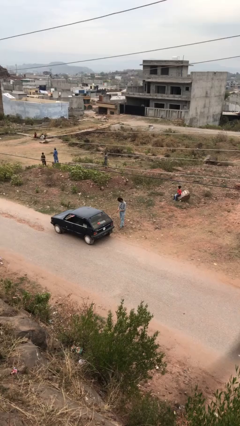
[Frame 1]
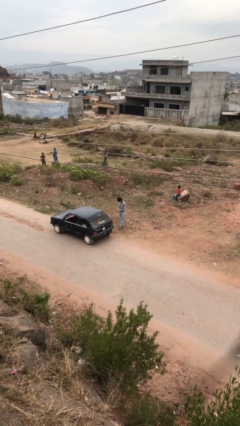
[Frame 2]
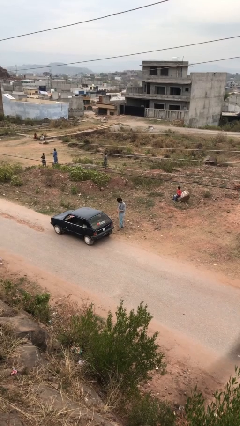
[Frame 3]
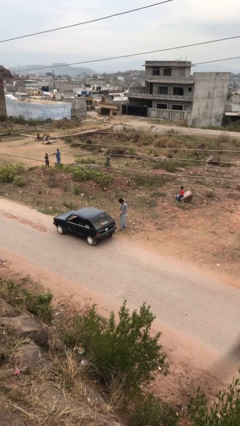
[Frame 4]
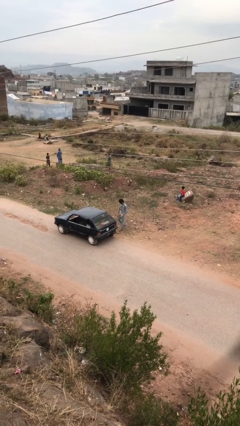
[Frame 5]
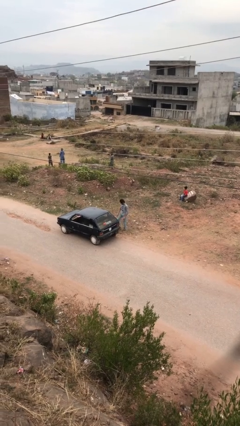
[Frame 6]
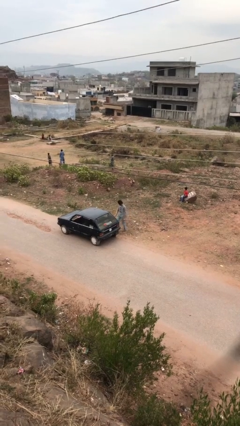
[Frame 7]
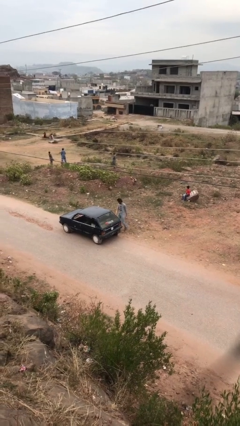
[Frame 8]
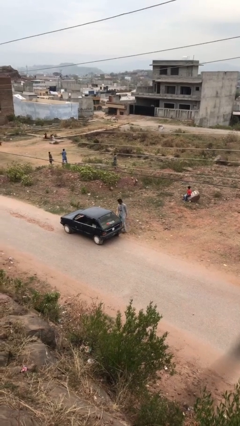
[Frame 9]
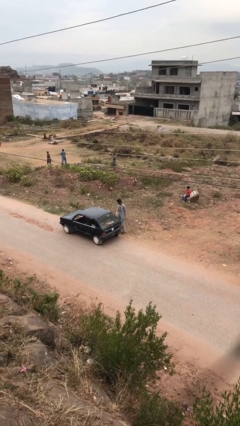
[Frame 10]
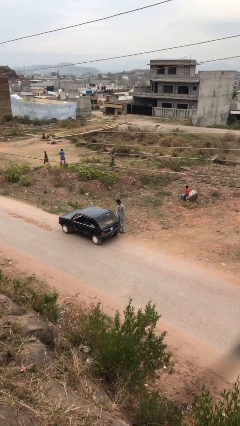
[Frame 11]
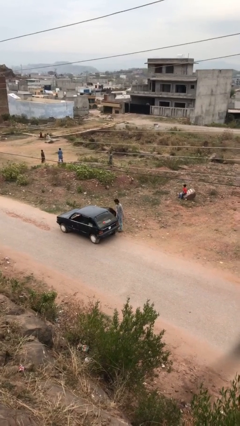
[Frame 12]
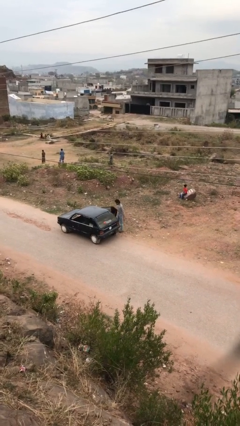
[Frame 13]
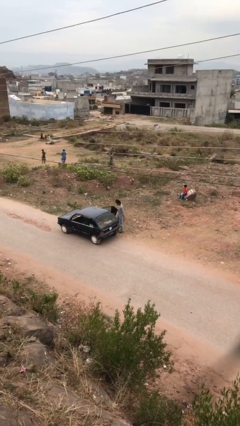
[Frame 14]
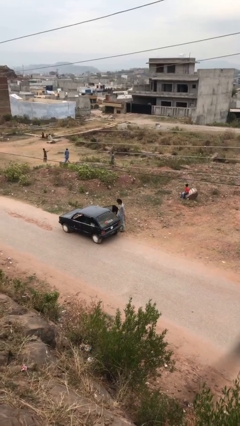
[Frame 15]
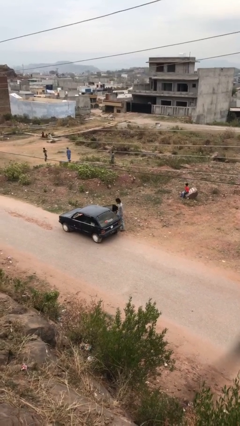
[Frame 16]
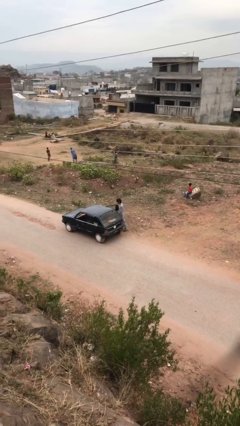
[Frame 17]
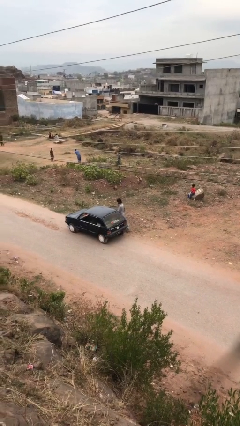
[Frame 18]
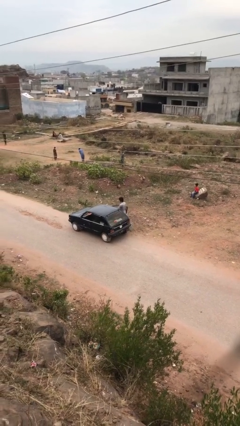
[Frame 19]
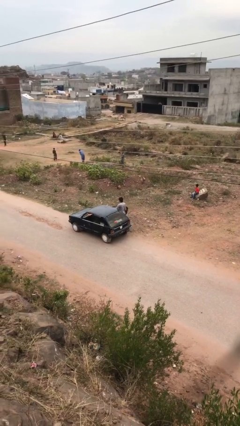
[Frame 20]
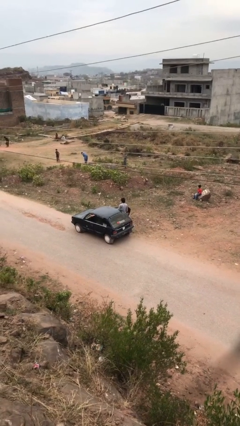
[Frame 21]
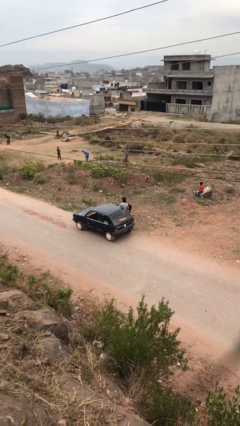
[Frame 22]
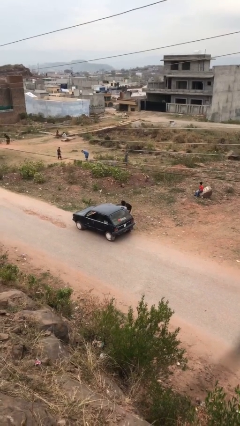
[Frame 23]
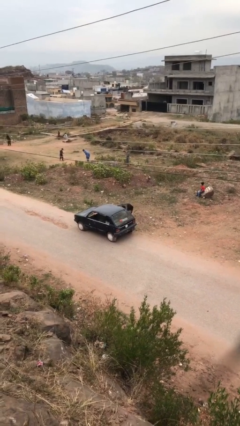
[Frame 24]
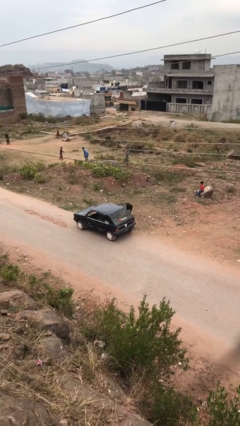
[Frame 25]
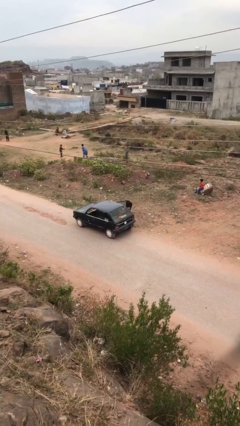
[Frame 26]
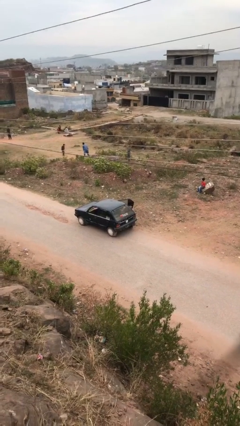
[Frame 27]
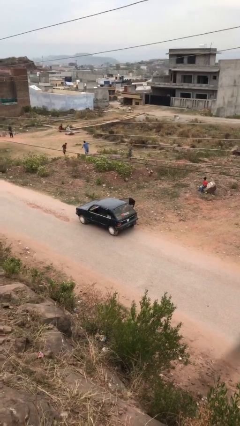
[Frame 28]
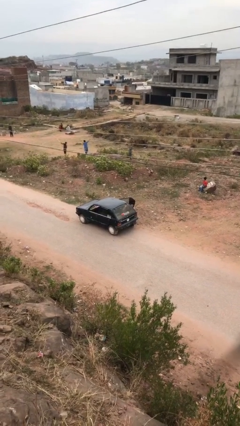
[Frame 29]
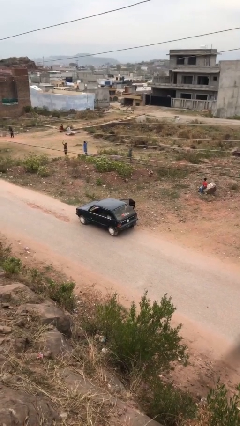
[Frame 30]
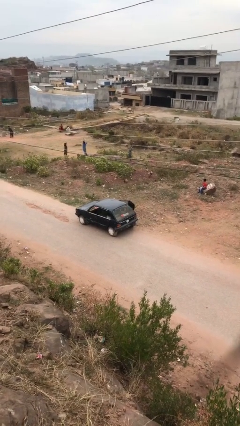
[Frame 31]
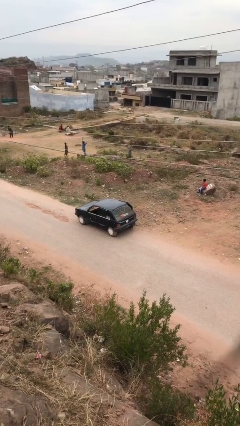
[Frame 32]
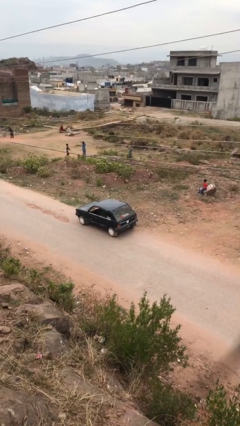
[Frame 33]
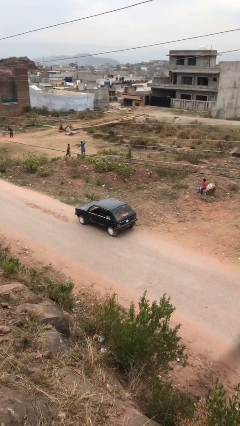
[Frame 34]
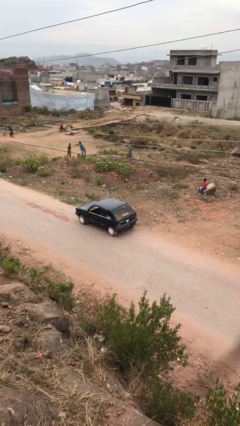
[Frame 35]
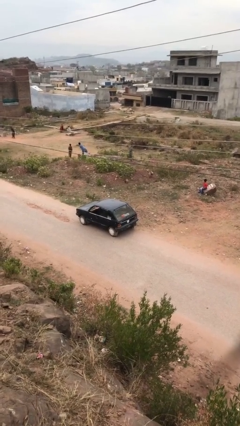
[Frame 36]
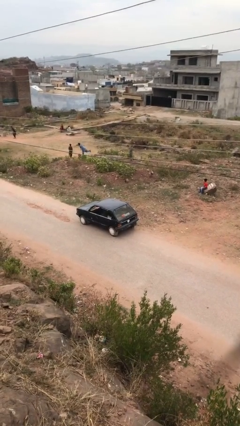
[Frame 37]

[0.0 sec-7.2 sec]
car picks up person

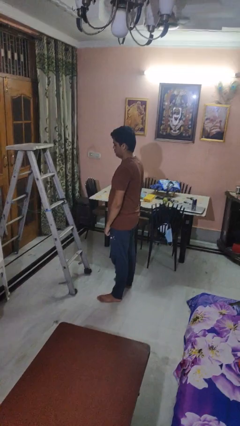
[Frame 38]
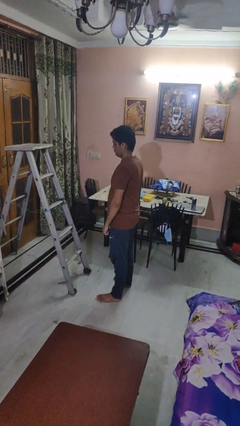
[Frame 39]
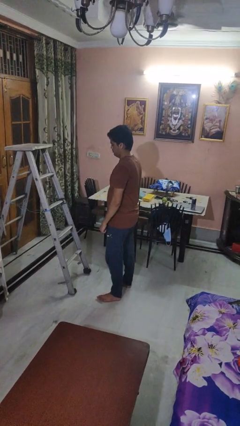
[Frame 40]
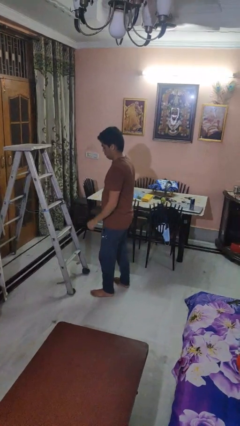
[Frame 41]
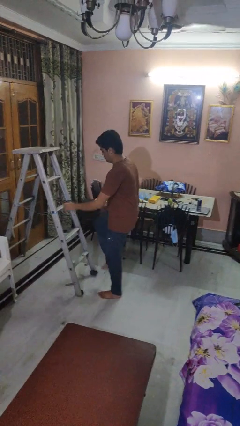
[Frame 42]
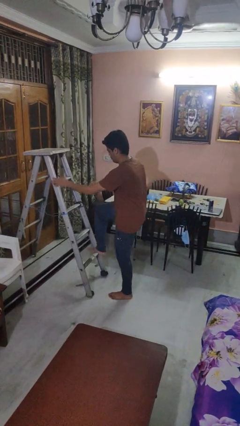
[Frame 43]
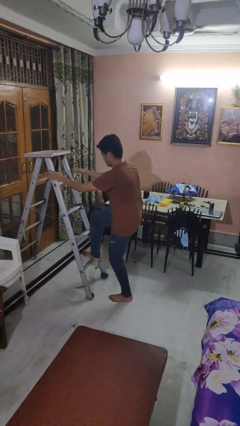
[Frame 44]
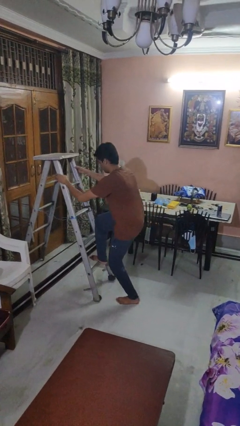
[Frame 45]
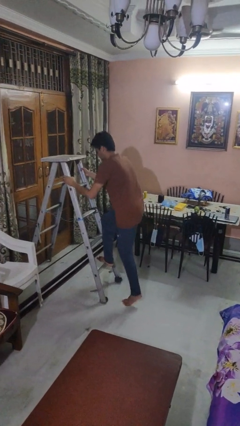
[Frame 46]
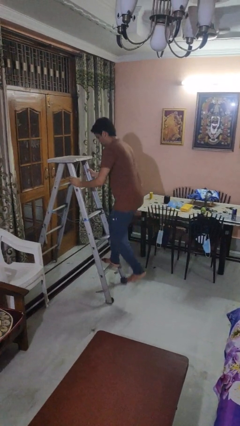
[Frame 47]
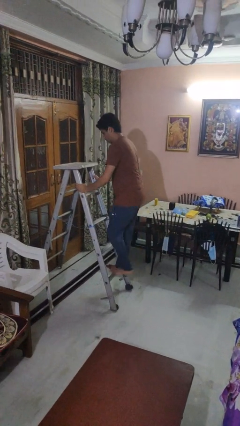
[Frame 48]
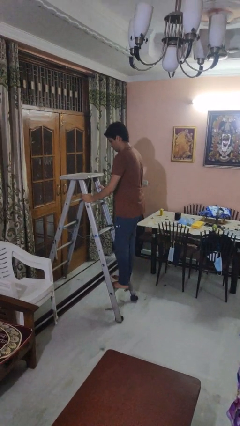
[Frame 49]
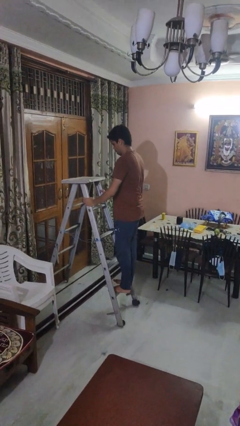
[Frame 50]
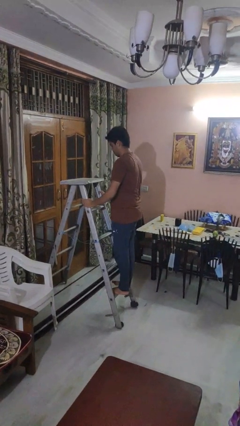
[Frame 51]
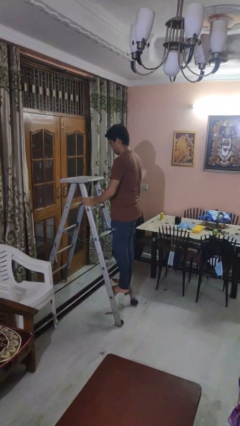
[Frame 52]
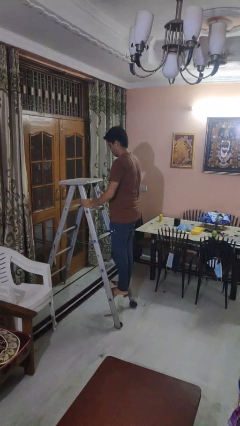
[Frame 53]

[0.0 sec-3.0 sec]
person climbs up ladder

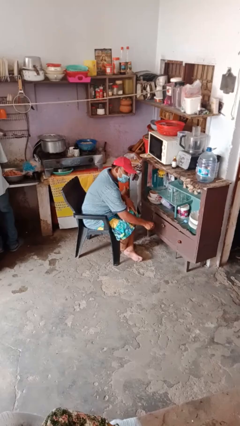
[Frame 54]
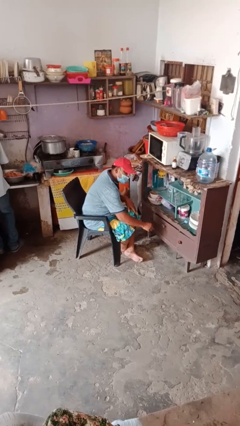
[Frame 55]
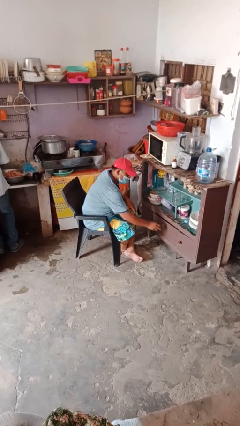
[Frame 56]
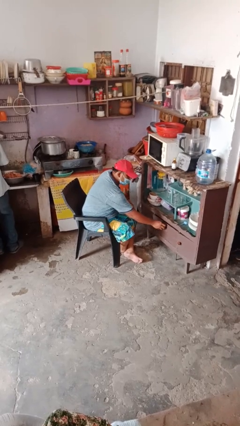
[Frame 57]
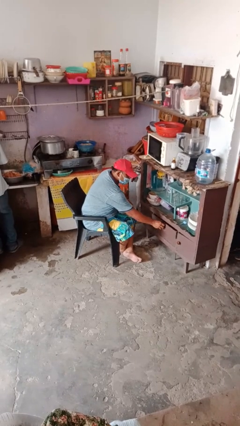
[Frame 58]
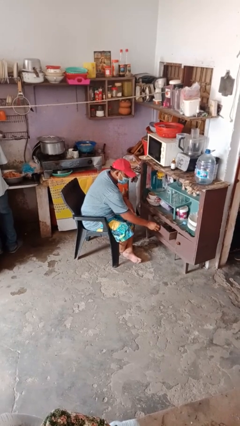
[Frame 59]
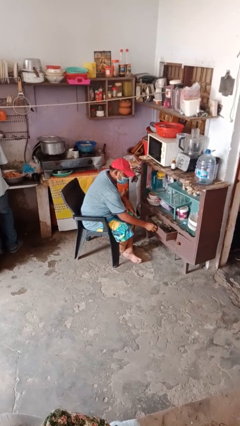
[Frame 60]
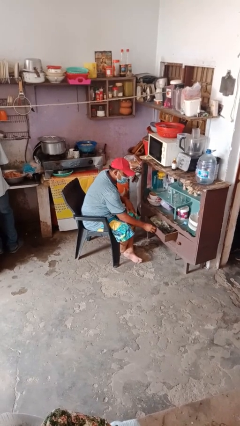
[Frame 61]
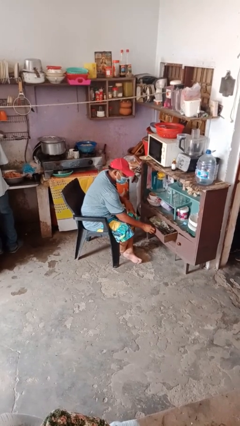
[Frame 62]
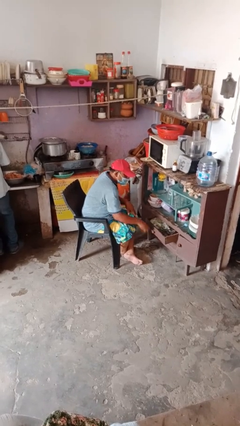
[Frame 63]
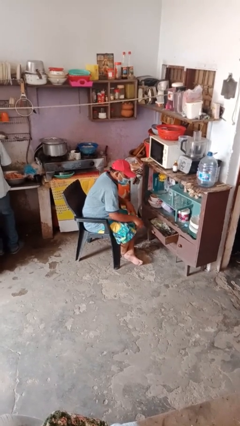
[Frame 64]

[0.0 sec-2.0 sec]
person opens dresser drawer

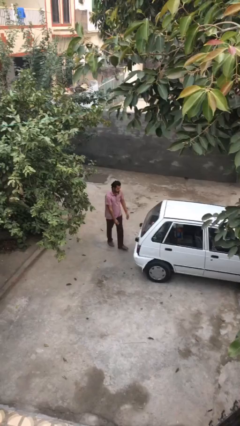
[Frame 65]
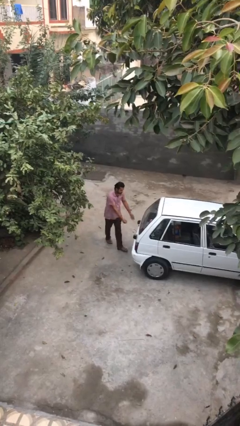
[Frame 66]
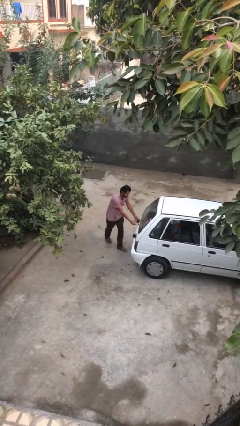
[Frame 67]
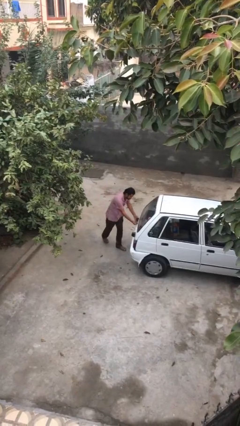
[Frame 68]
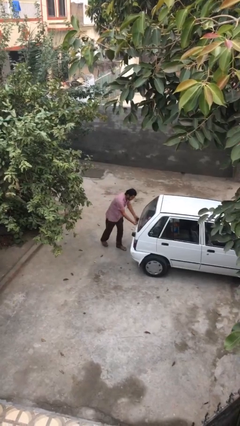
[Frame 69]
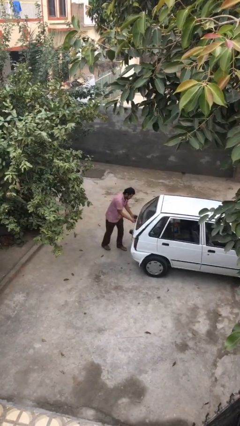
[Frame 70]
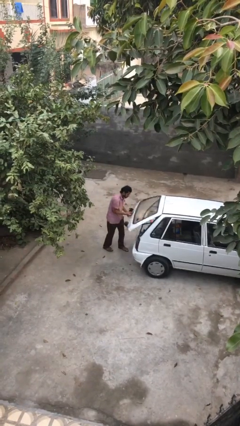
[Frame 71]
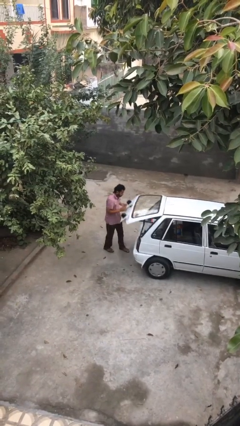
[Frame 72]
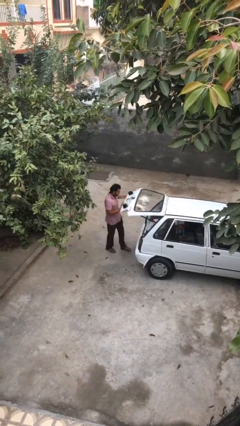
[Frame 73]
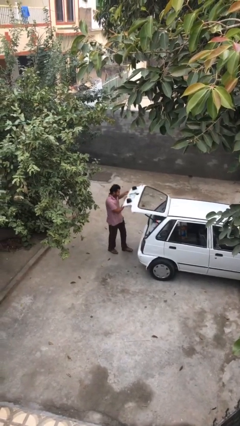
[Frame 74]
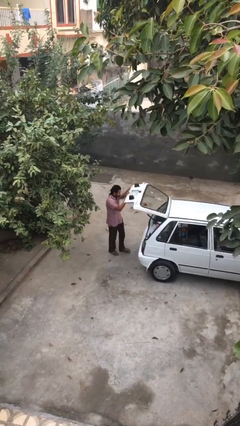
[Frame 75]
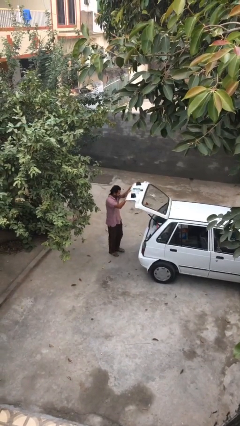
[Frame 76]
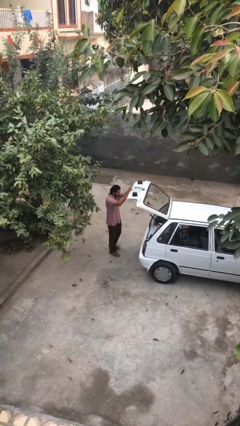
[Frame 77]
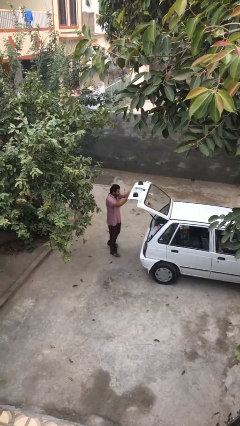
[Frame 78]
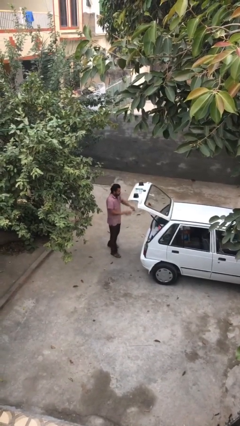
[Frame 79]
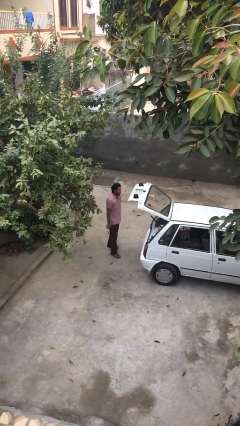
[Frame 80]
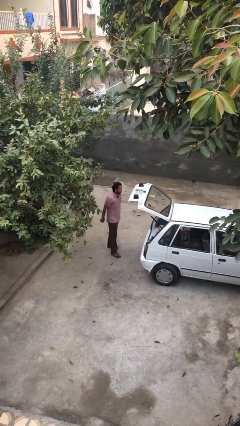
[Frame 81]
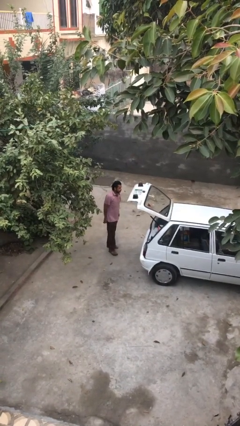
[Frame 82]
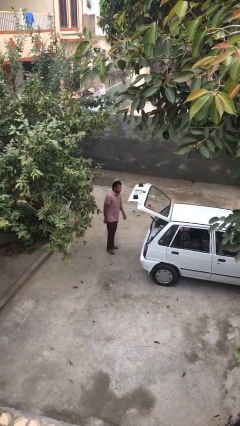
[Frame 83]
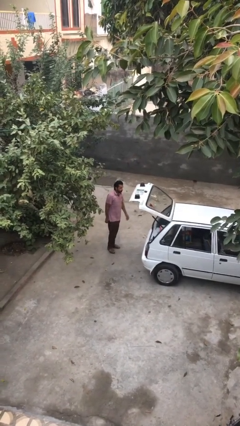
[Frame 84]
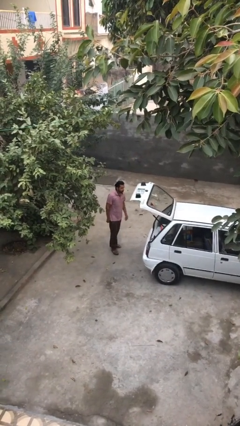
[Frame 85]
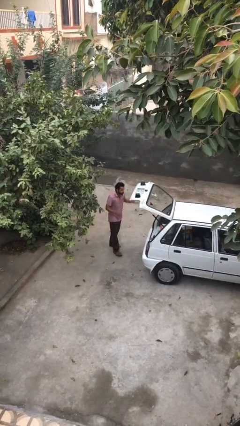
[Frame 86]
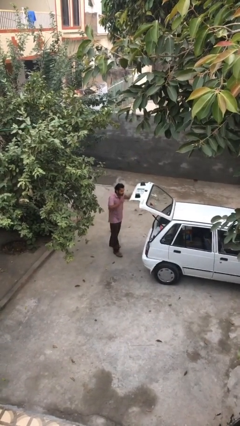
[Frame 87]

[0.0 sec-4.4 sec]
person opens car trunk

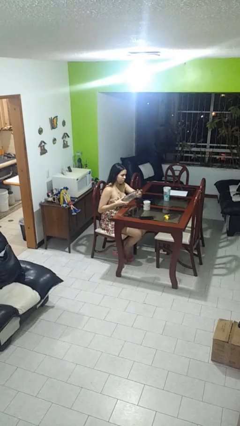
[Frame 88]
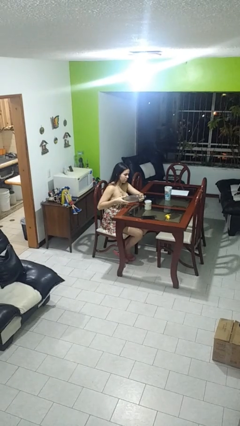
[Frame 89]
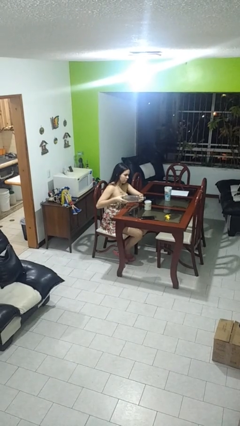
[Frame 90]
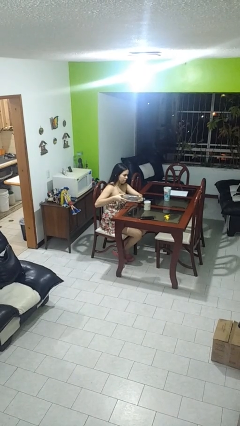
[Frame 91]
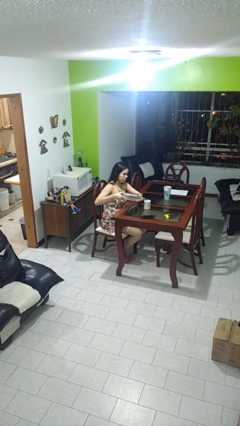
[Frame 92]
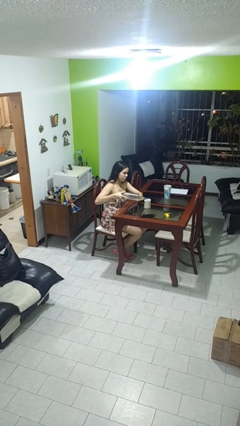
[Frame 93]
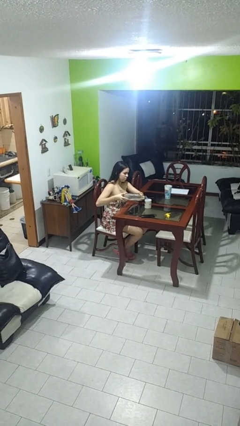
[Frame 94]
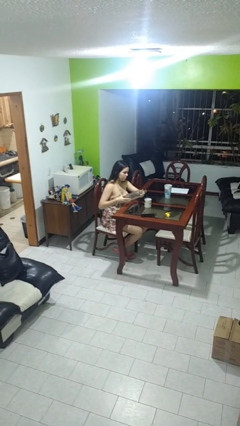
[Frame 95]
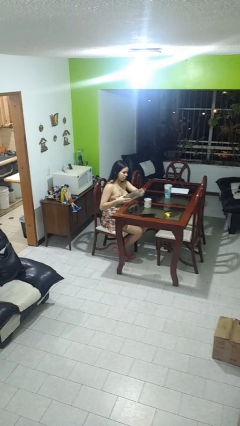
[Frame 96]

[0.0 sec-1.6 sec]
person pours liquid into cup
